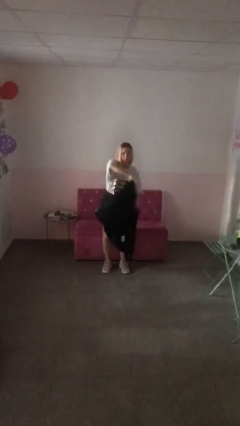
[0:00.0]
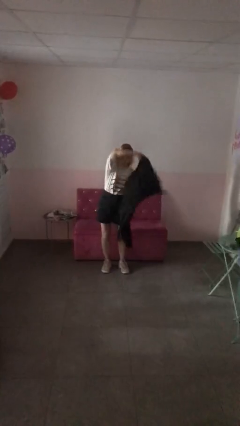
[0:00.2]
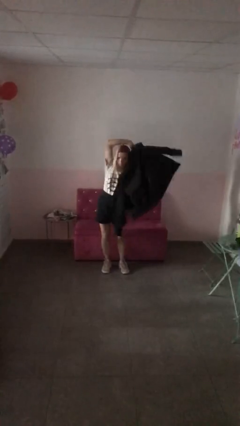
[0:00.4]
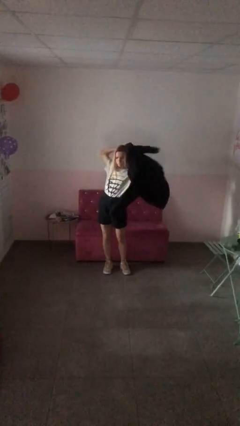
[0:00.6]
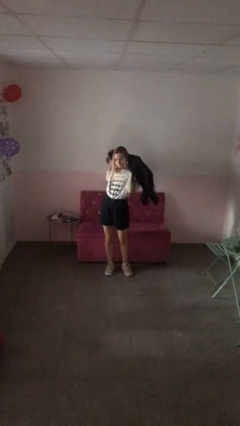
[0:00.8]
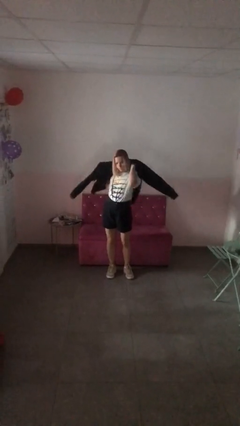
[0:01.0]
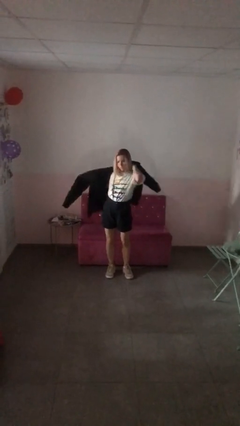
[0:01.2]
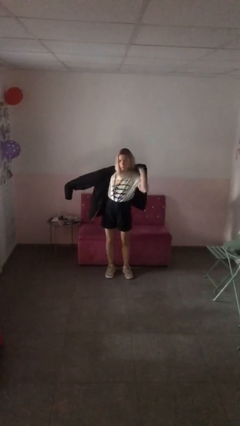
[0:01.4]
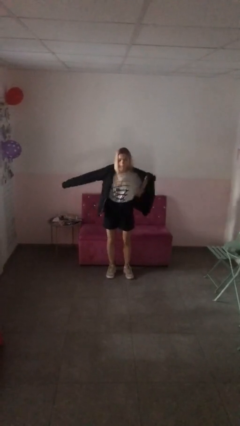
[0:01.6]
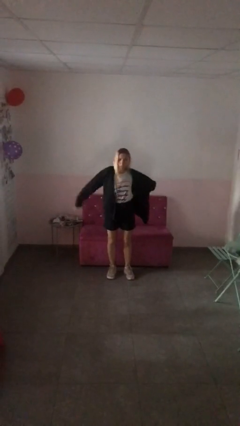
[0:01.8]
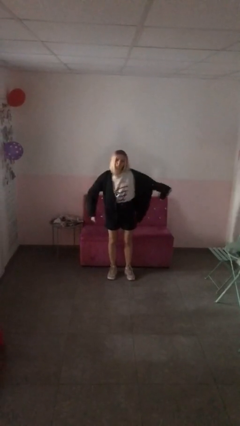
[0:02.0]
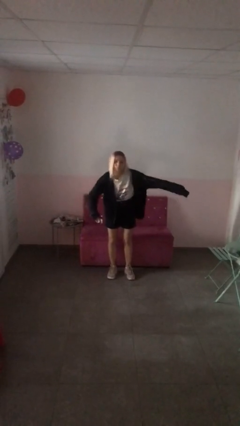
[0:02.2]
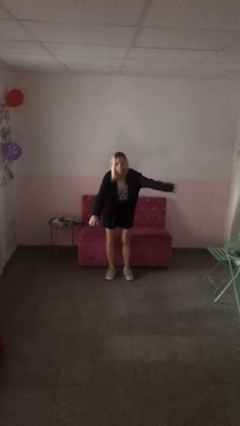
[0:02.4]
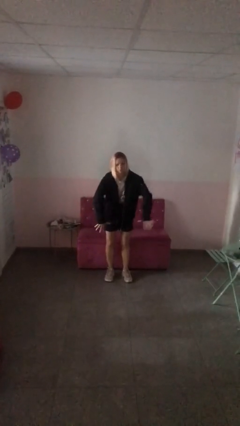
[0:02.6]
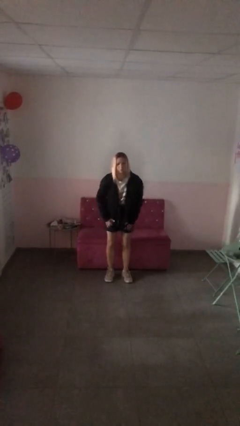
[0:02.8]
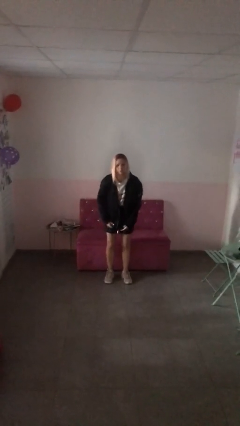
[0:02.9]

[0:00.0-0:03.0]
person puts on jacket

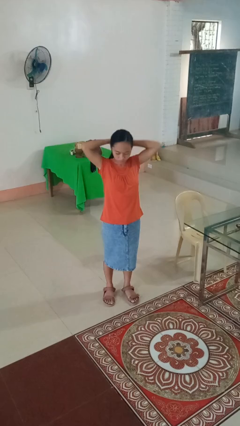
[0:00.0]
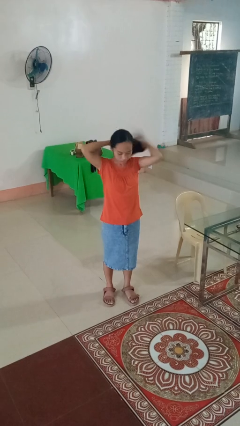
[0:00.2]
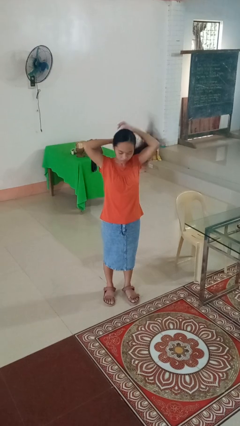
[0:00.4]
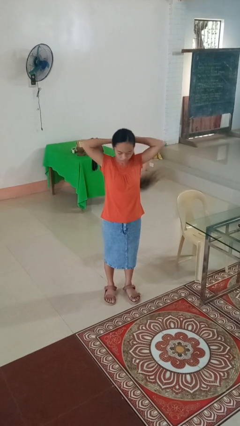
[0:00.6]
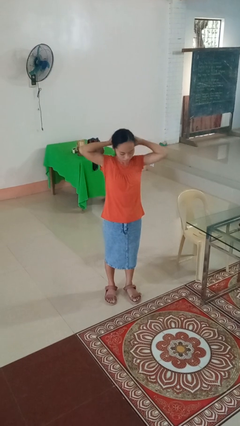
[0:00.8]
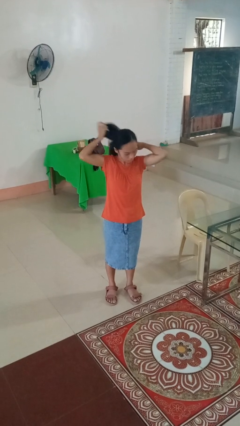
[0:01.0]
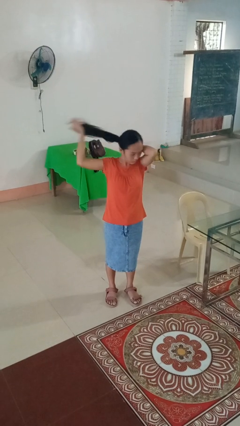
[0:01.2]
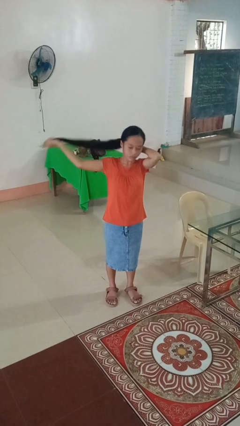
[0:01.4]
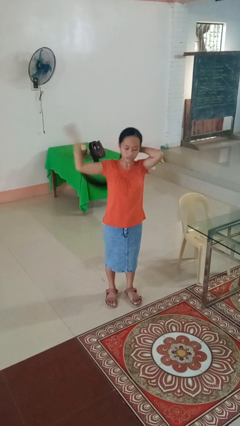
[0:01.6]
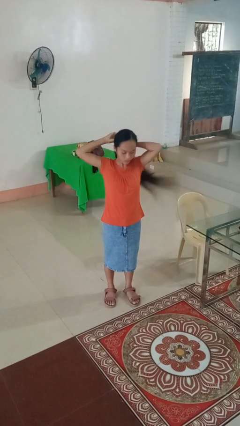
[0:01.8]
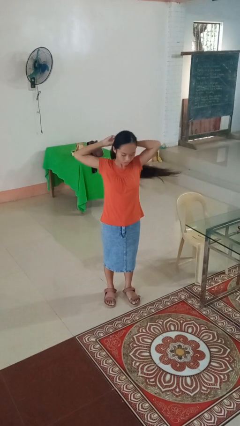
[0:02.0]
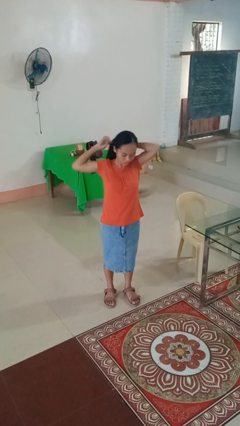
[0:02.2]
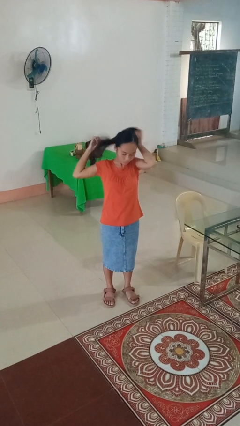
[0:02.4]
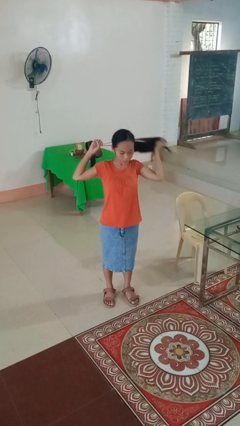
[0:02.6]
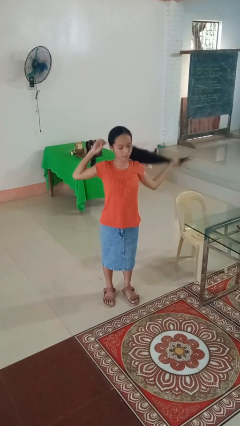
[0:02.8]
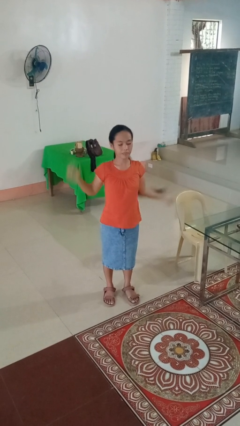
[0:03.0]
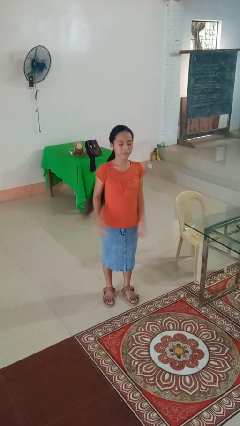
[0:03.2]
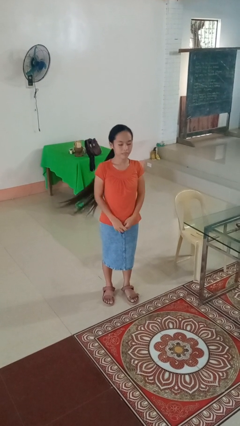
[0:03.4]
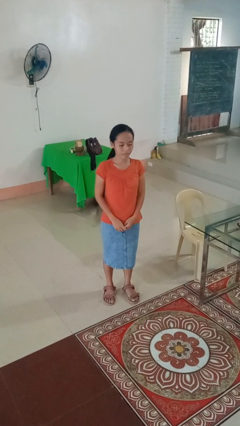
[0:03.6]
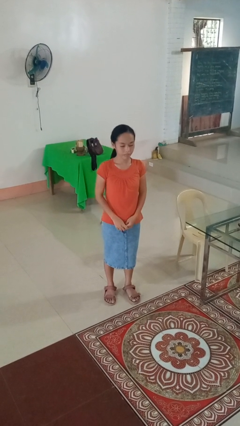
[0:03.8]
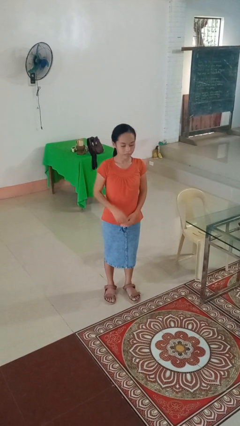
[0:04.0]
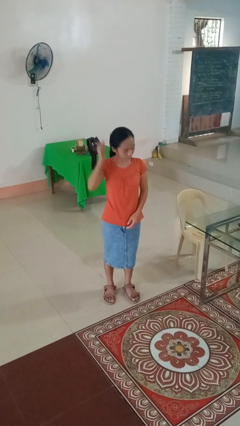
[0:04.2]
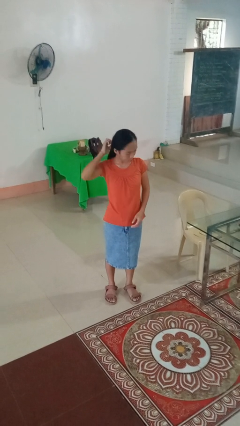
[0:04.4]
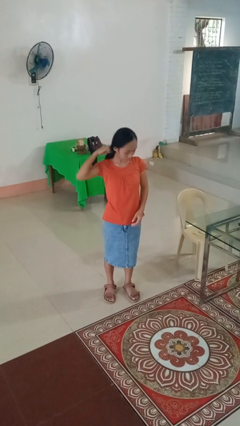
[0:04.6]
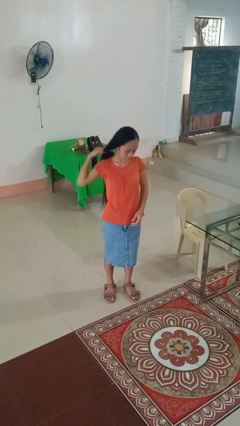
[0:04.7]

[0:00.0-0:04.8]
person puts hair in ponytail

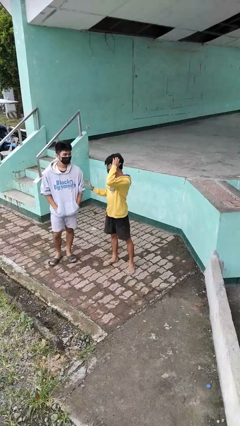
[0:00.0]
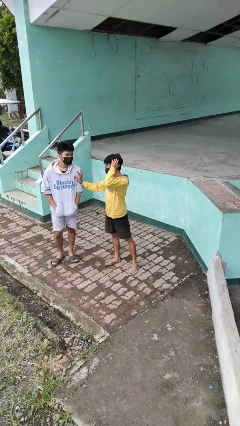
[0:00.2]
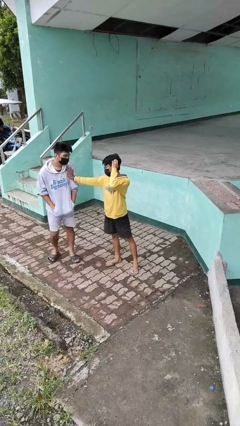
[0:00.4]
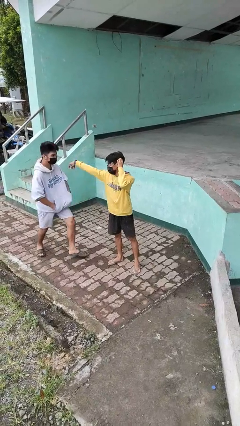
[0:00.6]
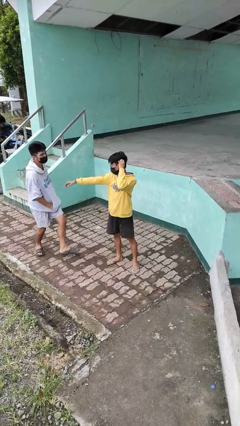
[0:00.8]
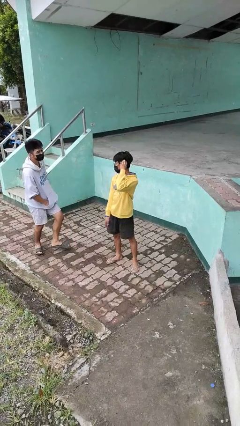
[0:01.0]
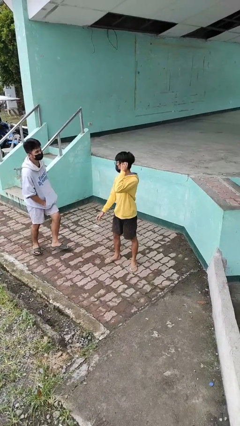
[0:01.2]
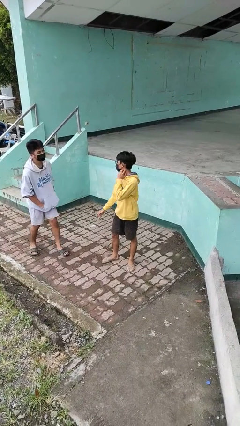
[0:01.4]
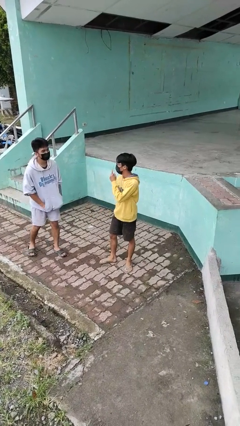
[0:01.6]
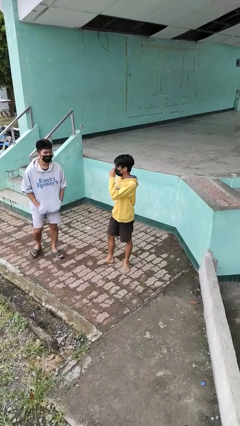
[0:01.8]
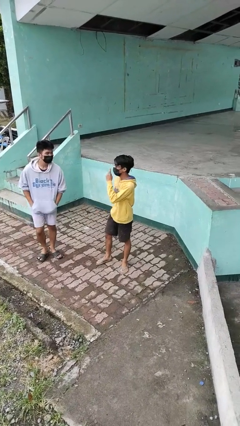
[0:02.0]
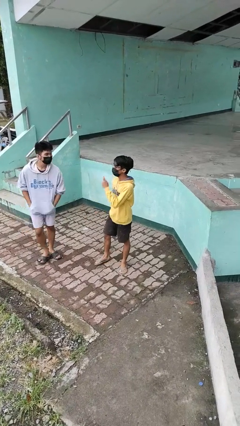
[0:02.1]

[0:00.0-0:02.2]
person shoves person

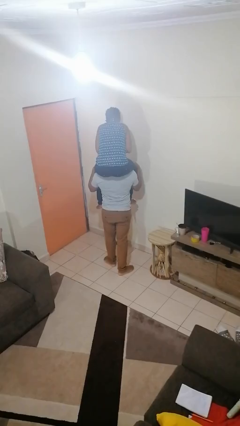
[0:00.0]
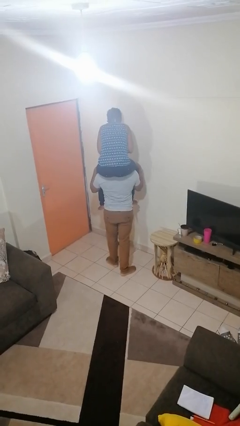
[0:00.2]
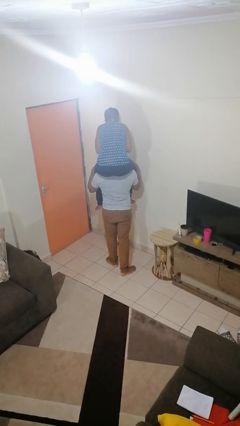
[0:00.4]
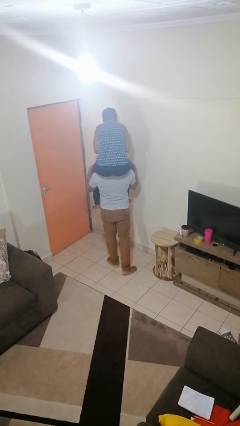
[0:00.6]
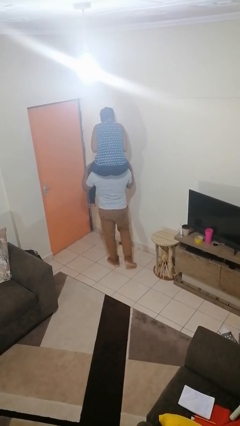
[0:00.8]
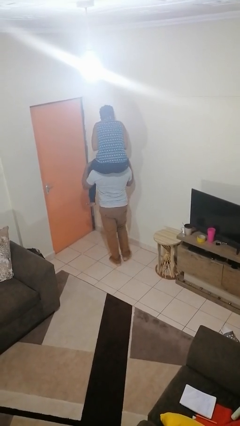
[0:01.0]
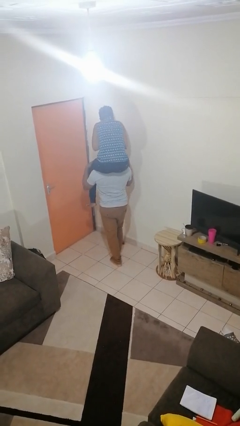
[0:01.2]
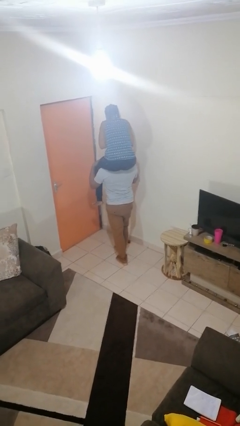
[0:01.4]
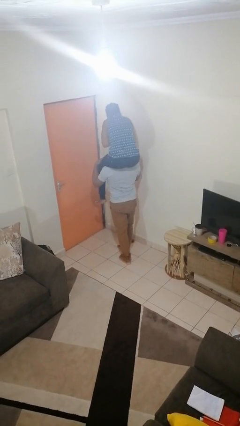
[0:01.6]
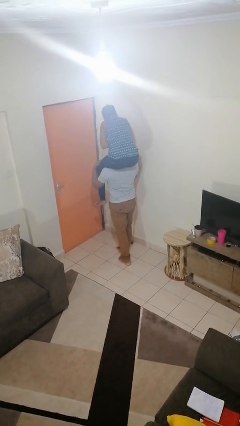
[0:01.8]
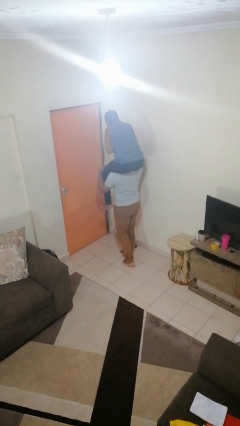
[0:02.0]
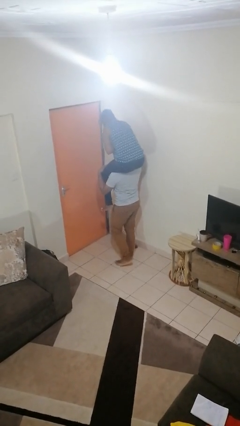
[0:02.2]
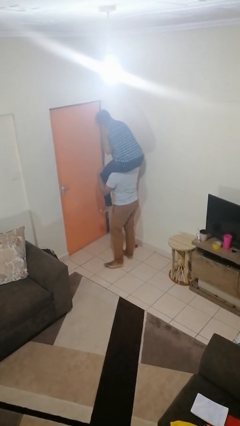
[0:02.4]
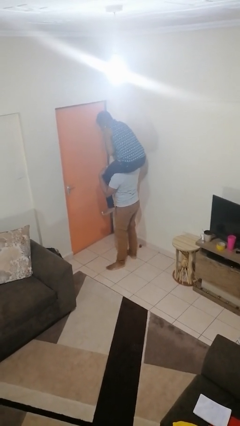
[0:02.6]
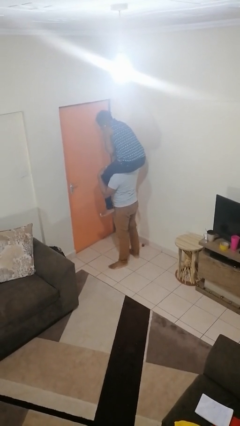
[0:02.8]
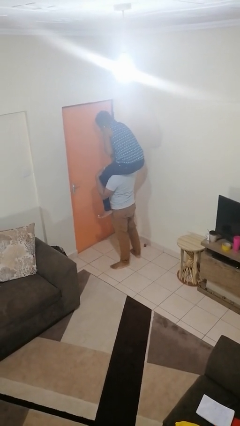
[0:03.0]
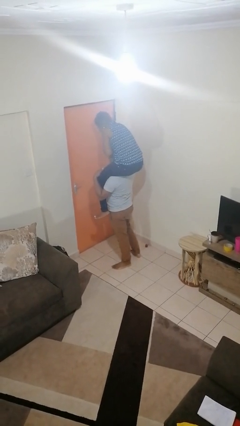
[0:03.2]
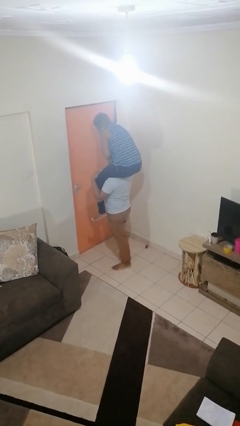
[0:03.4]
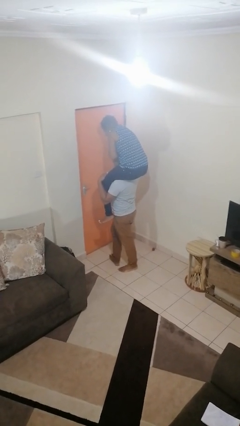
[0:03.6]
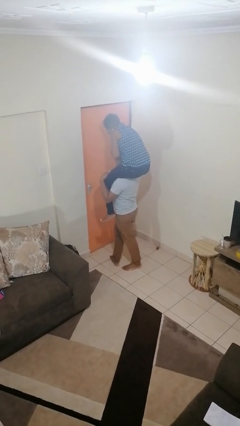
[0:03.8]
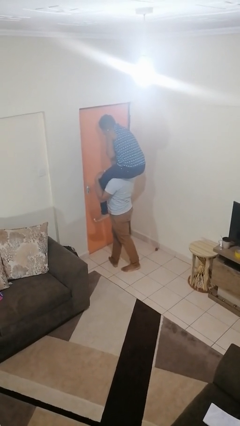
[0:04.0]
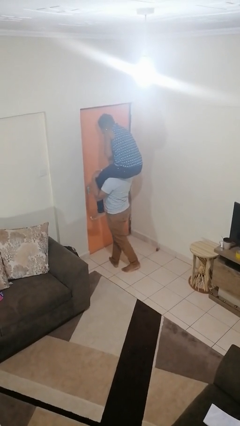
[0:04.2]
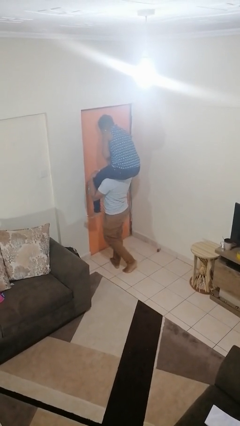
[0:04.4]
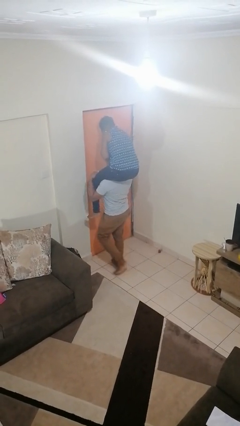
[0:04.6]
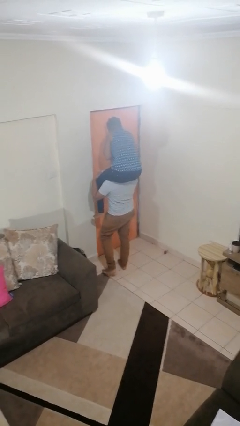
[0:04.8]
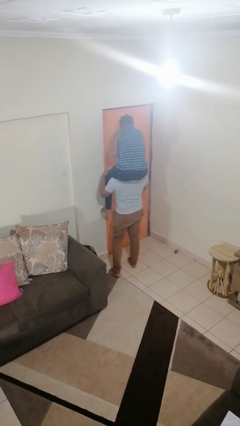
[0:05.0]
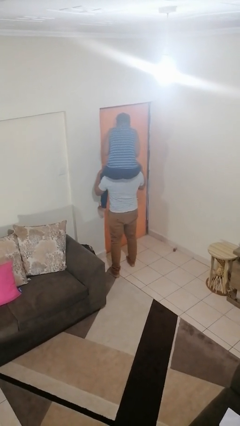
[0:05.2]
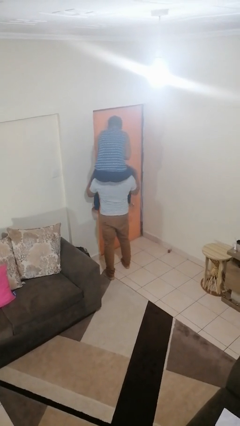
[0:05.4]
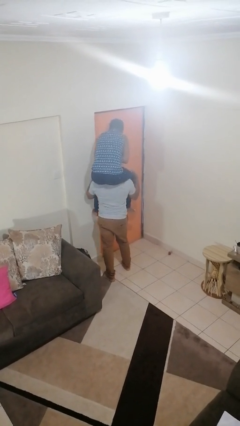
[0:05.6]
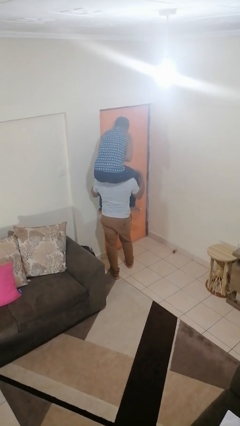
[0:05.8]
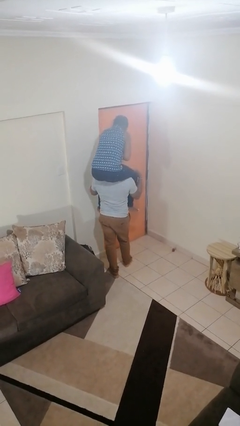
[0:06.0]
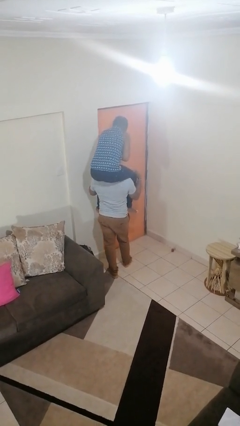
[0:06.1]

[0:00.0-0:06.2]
person carries person on shoulders

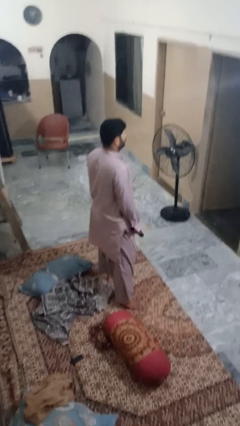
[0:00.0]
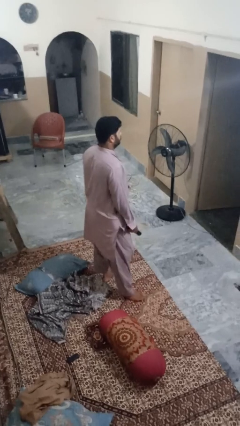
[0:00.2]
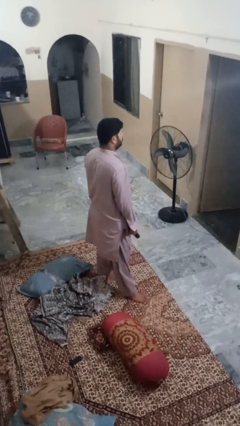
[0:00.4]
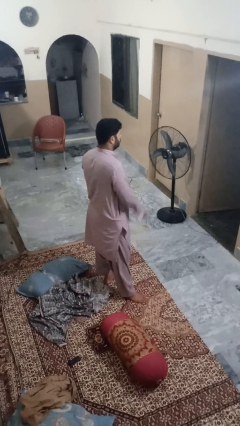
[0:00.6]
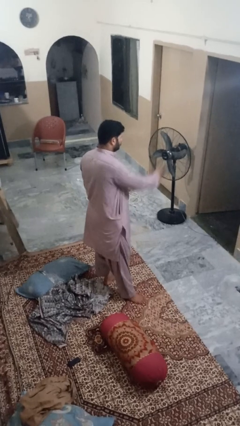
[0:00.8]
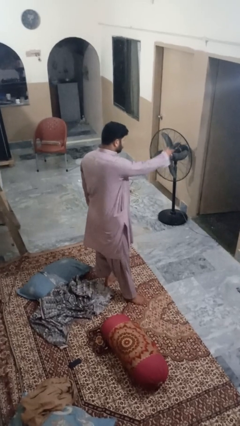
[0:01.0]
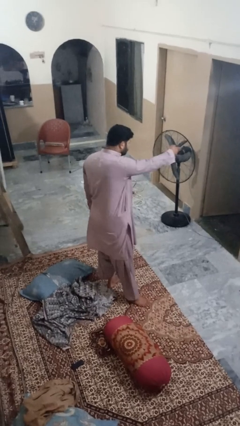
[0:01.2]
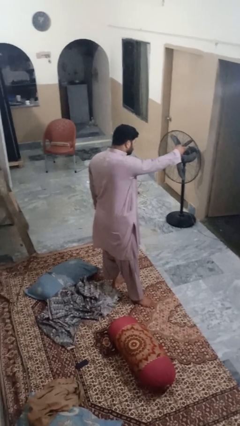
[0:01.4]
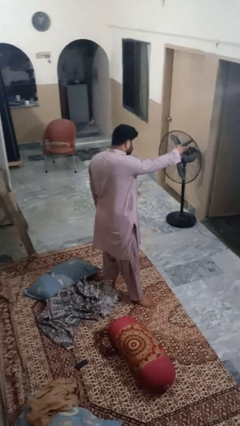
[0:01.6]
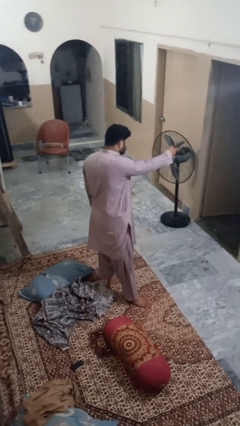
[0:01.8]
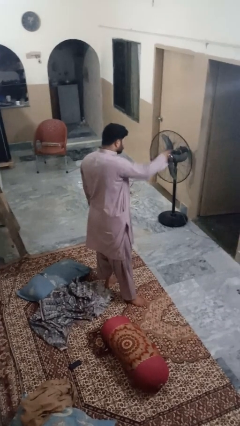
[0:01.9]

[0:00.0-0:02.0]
person uses television remote
